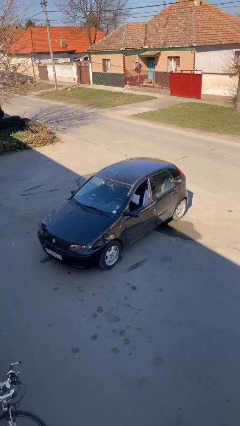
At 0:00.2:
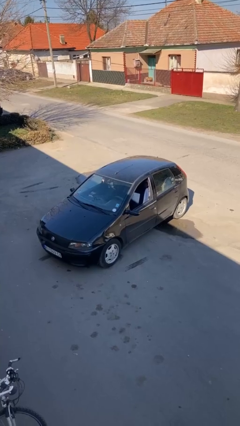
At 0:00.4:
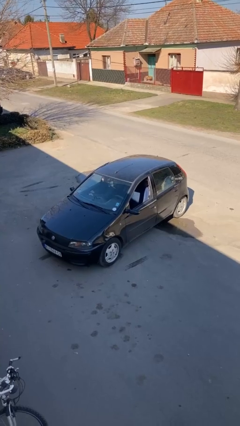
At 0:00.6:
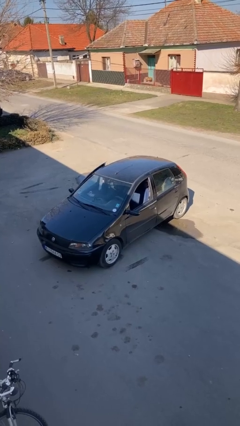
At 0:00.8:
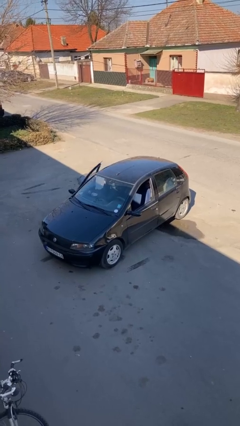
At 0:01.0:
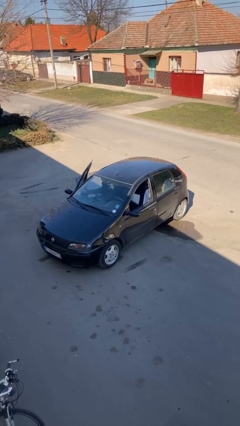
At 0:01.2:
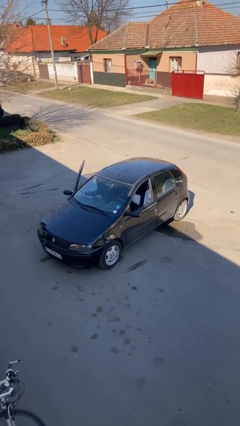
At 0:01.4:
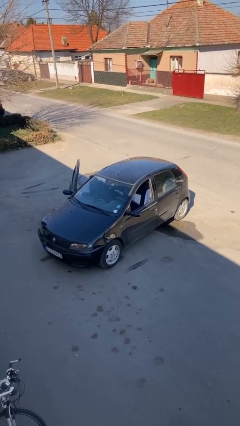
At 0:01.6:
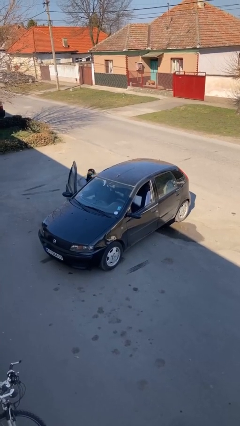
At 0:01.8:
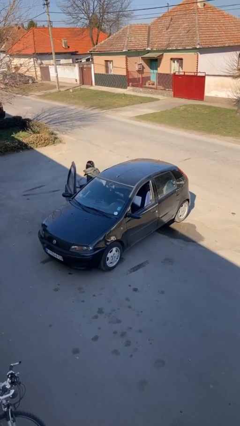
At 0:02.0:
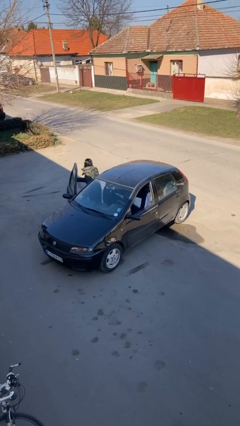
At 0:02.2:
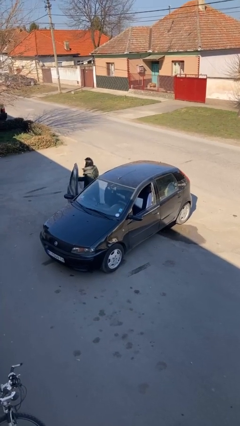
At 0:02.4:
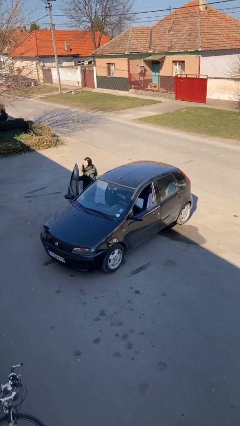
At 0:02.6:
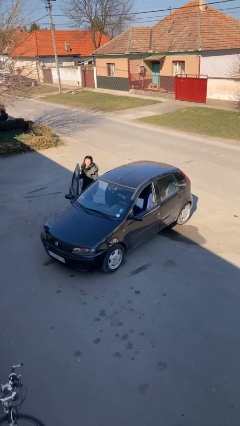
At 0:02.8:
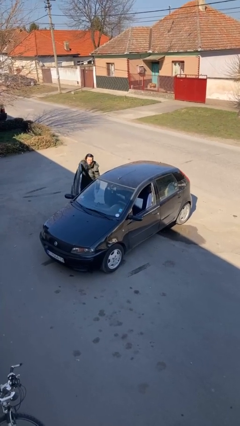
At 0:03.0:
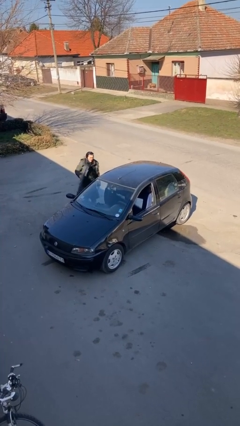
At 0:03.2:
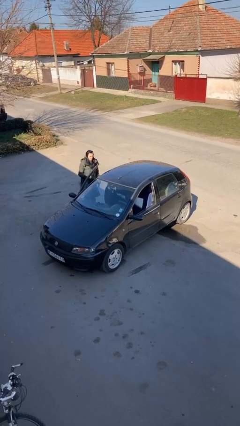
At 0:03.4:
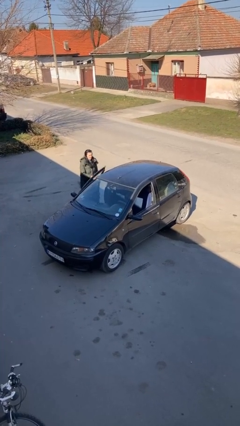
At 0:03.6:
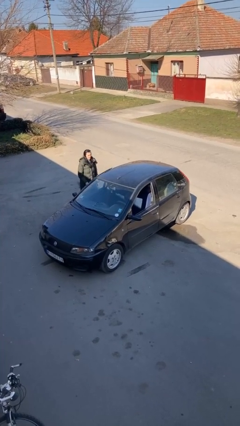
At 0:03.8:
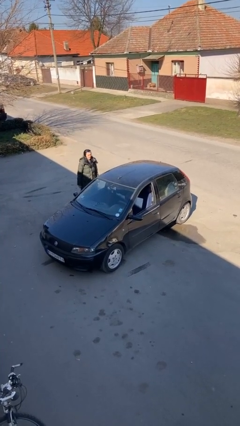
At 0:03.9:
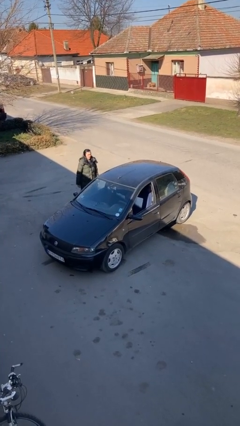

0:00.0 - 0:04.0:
car drops off person

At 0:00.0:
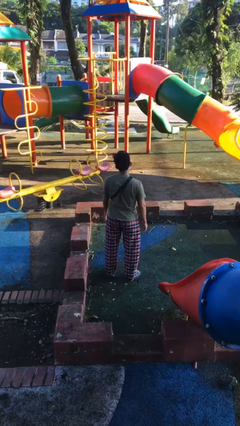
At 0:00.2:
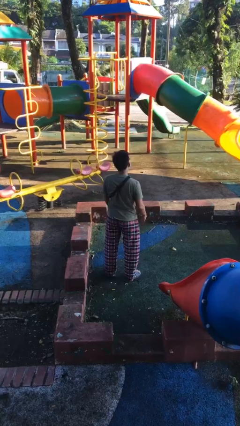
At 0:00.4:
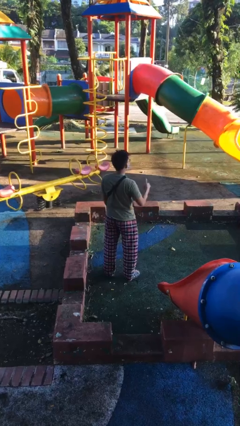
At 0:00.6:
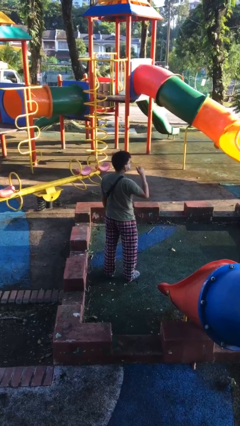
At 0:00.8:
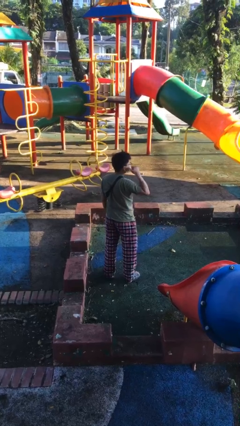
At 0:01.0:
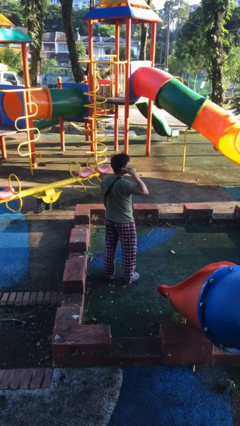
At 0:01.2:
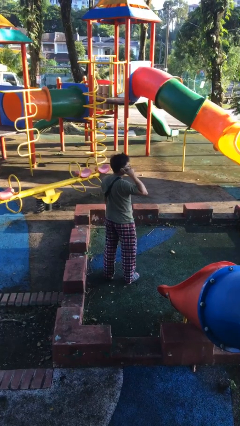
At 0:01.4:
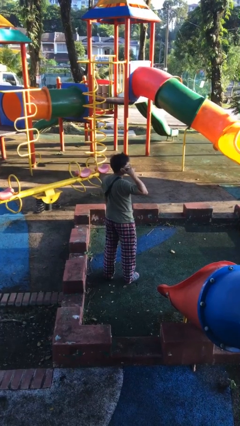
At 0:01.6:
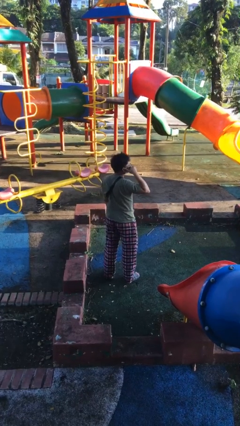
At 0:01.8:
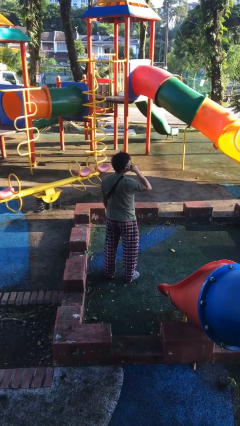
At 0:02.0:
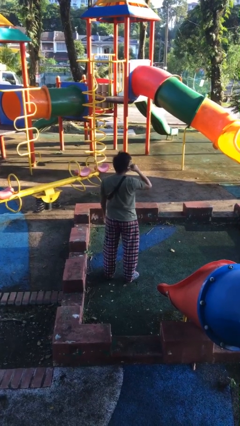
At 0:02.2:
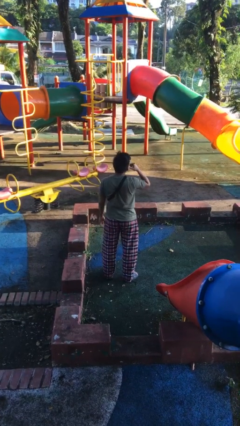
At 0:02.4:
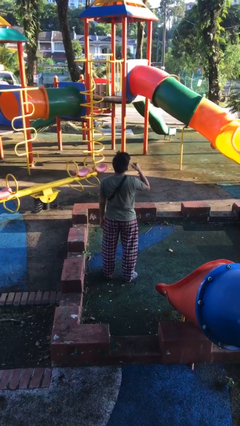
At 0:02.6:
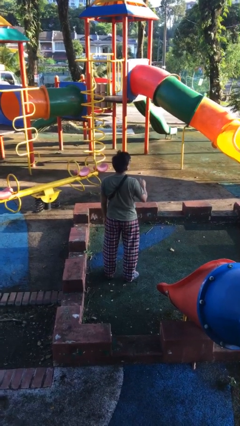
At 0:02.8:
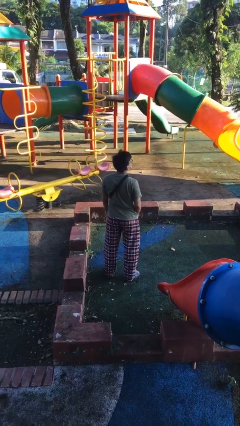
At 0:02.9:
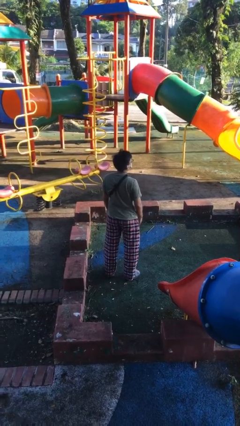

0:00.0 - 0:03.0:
person gestures call me

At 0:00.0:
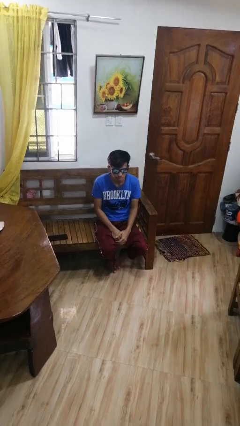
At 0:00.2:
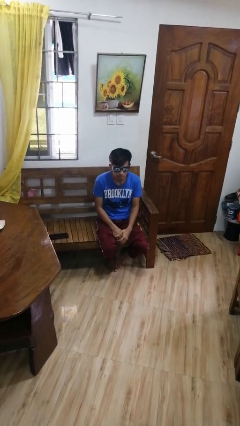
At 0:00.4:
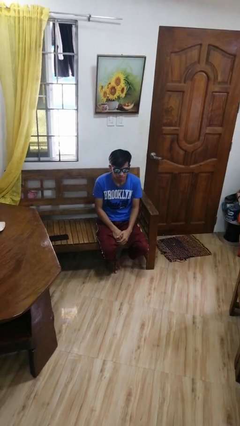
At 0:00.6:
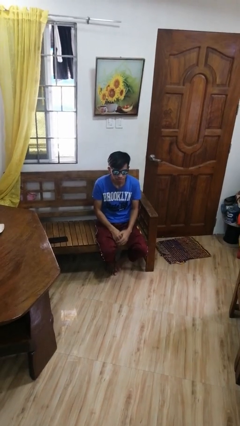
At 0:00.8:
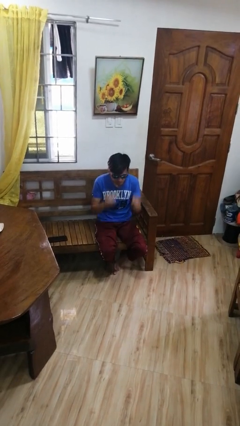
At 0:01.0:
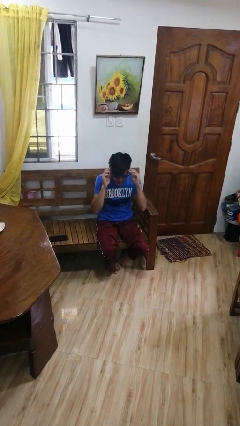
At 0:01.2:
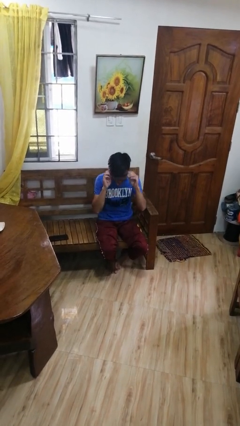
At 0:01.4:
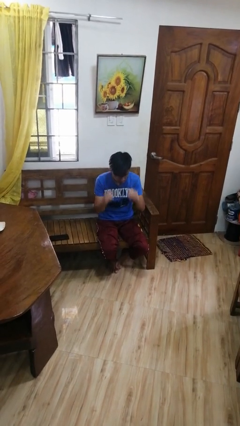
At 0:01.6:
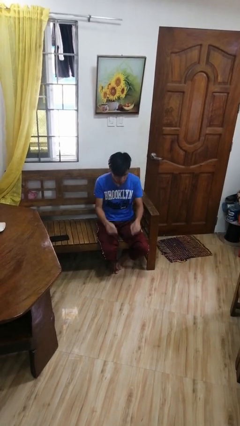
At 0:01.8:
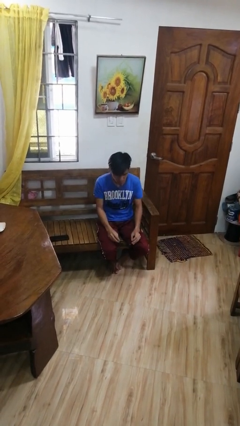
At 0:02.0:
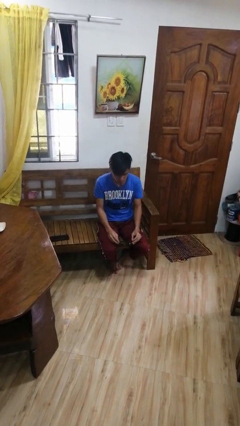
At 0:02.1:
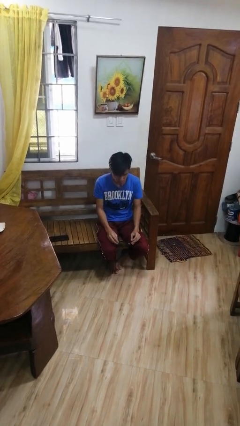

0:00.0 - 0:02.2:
person takes off sunglasses

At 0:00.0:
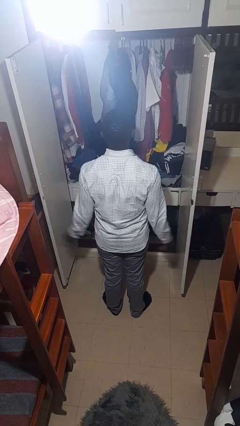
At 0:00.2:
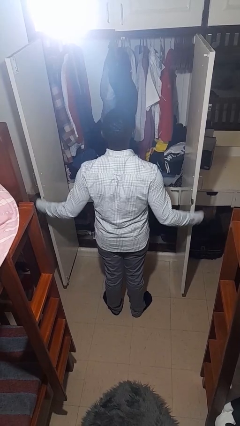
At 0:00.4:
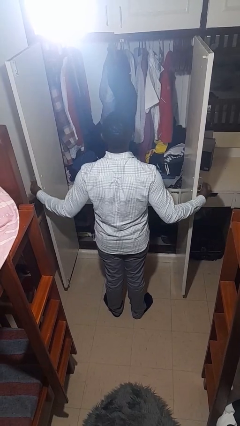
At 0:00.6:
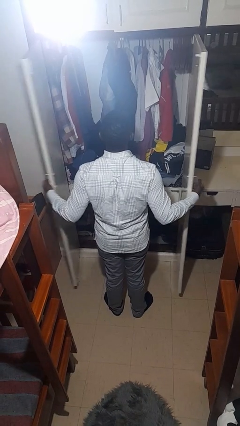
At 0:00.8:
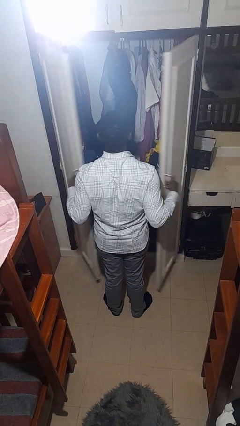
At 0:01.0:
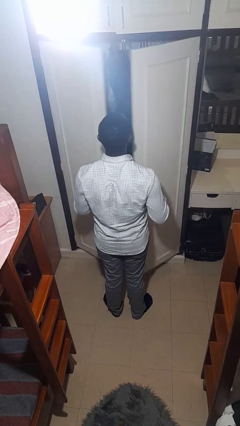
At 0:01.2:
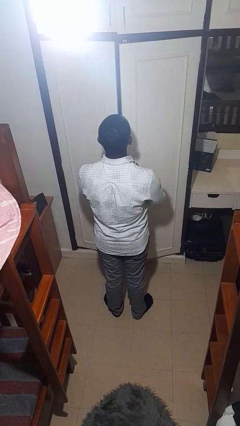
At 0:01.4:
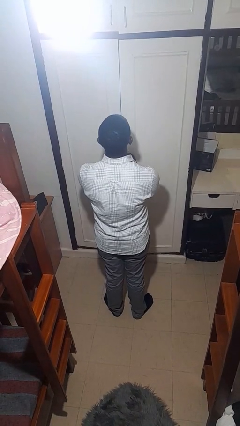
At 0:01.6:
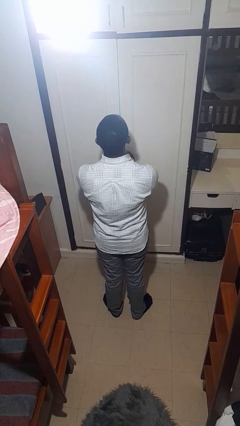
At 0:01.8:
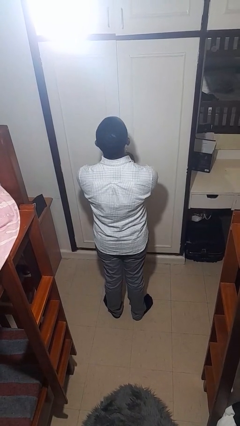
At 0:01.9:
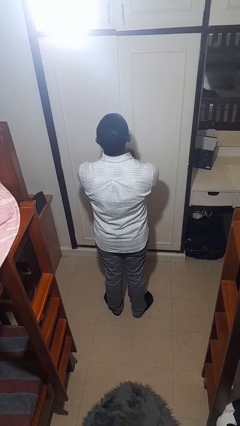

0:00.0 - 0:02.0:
person closes closet door

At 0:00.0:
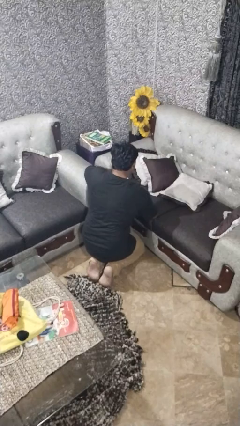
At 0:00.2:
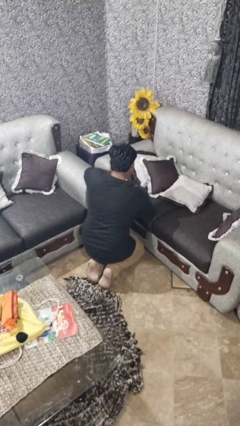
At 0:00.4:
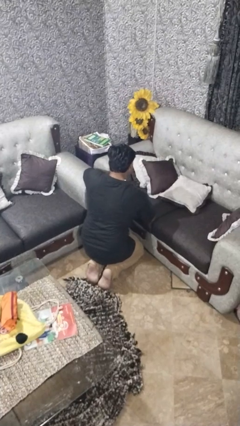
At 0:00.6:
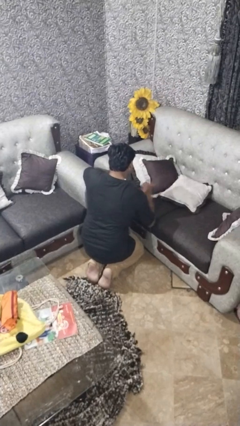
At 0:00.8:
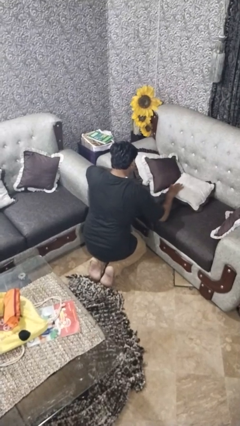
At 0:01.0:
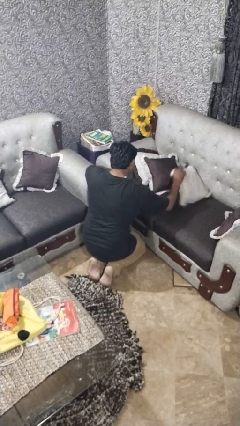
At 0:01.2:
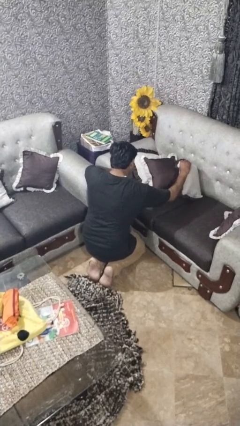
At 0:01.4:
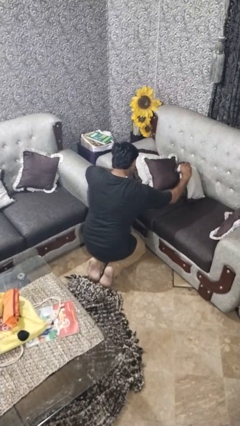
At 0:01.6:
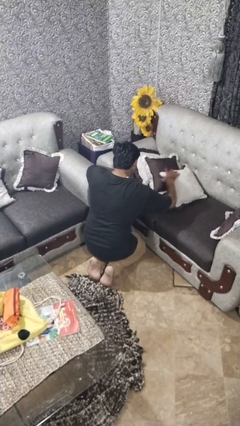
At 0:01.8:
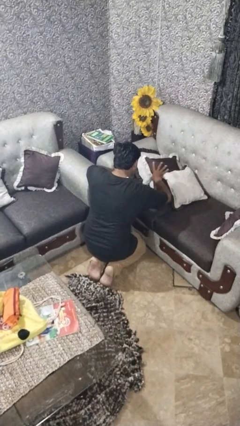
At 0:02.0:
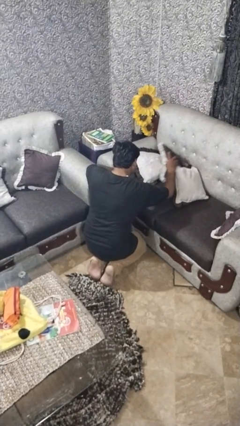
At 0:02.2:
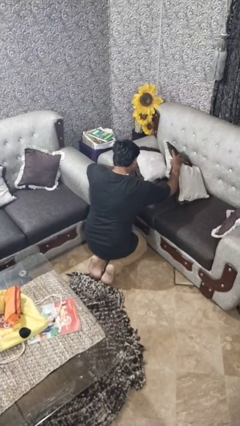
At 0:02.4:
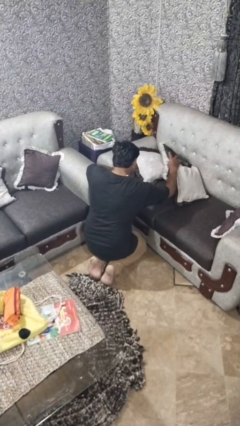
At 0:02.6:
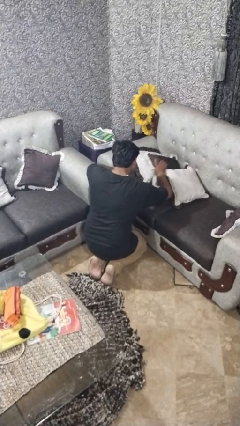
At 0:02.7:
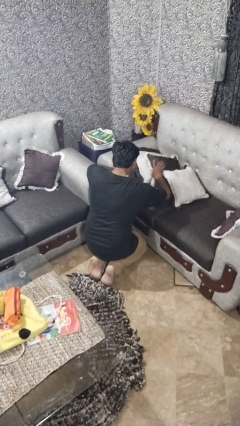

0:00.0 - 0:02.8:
person searches in couch

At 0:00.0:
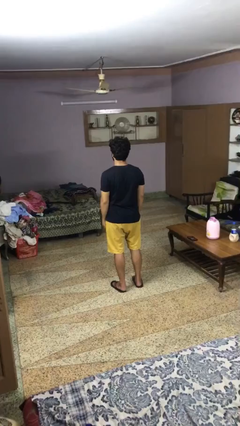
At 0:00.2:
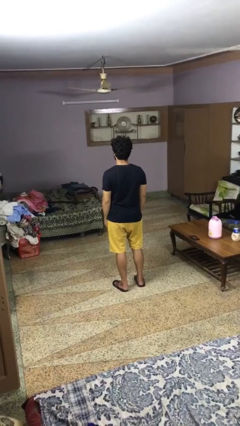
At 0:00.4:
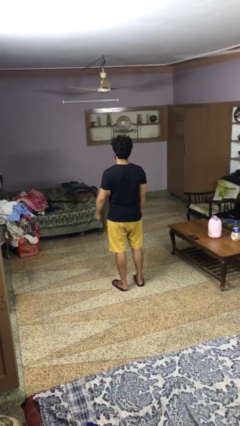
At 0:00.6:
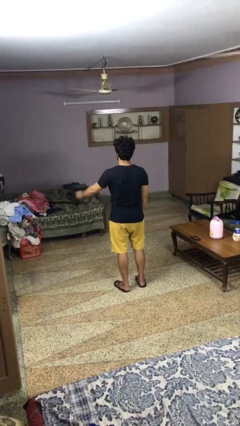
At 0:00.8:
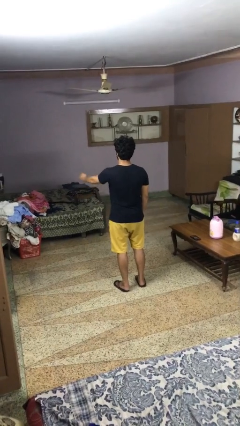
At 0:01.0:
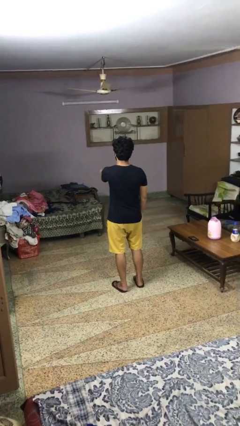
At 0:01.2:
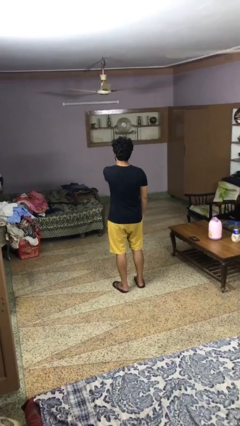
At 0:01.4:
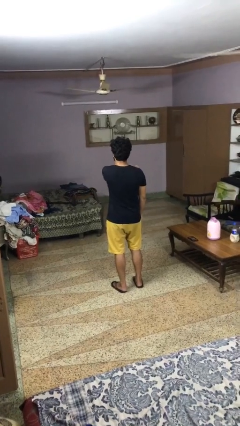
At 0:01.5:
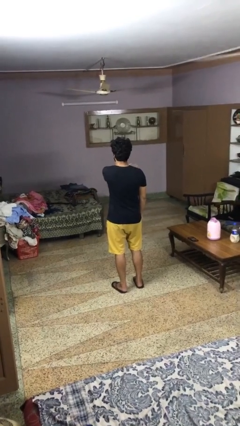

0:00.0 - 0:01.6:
person gestures swipe right

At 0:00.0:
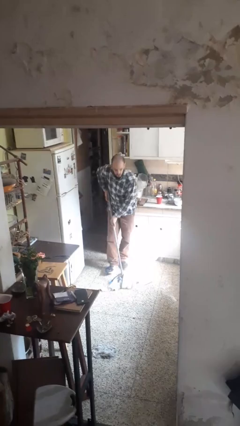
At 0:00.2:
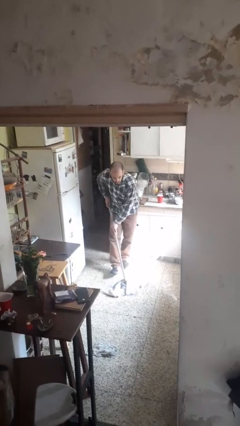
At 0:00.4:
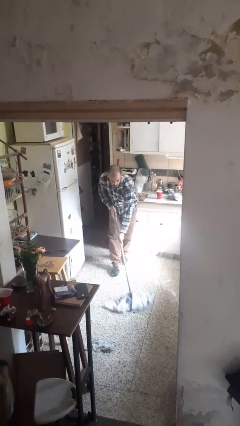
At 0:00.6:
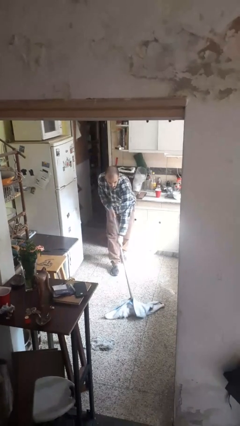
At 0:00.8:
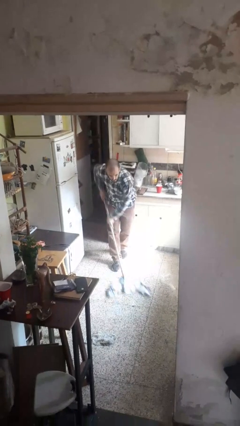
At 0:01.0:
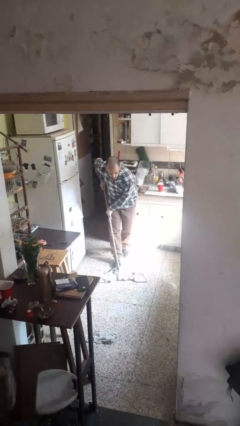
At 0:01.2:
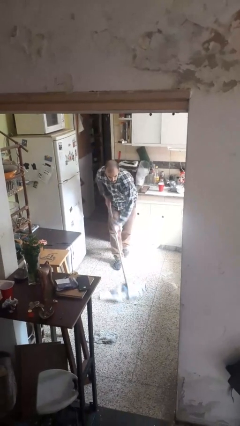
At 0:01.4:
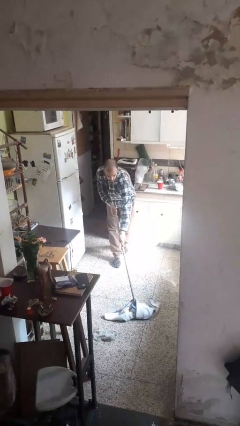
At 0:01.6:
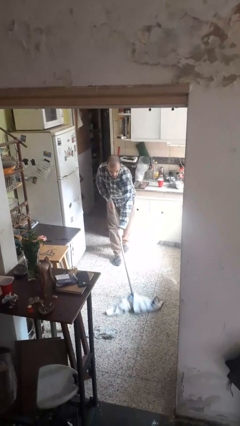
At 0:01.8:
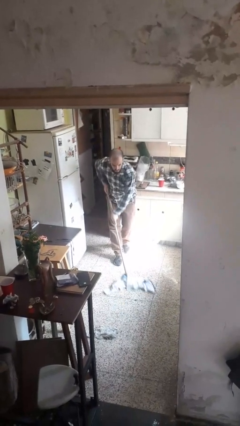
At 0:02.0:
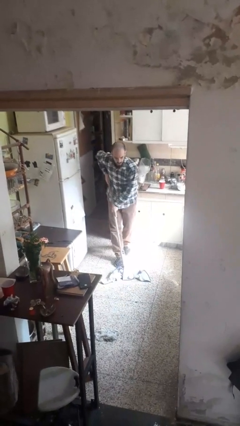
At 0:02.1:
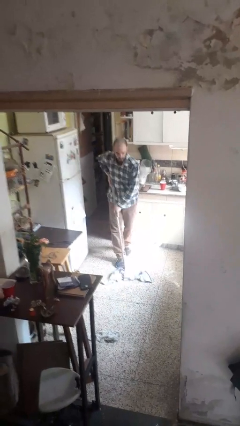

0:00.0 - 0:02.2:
person mops
